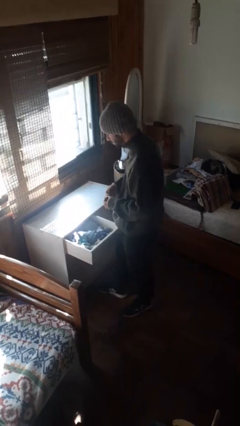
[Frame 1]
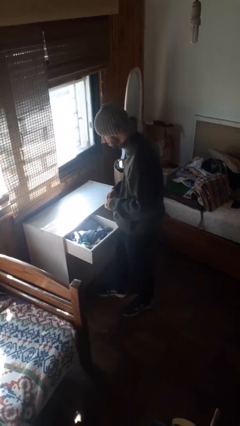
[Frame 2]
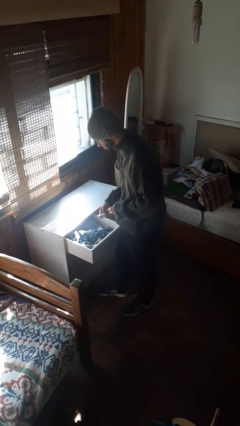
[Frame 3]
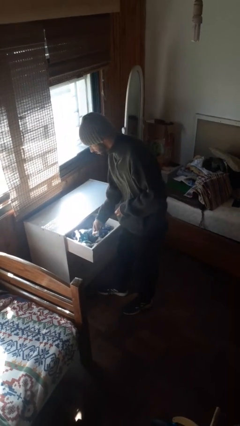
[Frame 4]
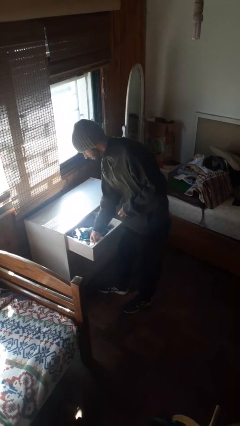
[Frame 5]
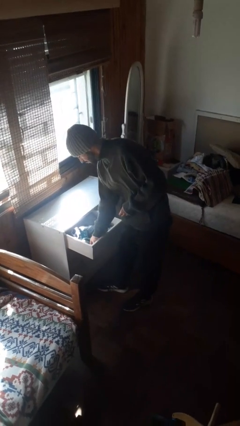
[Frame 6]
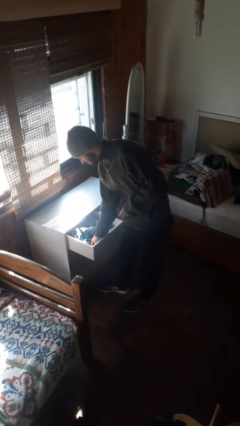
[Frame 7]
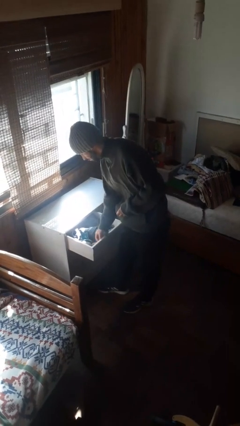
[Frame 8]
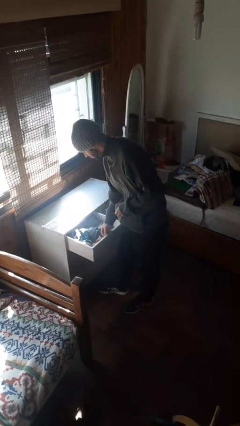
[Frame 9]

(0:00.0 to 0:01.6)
person puts clothes into dresser

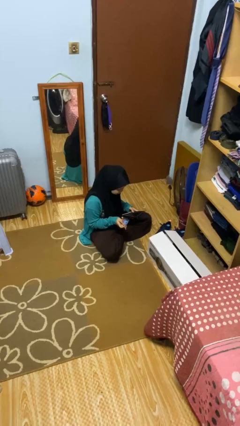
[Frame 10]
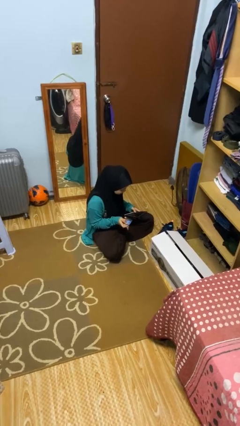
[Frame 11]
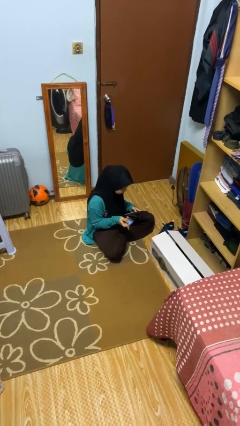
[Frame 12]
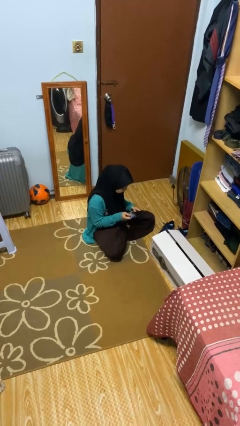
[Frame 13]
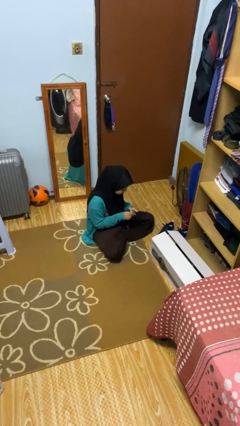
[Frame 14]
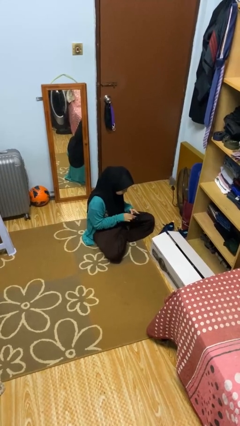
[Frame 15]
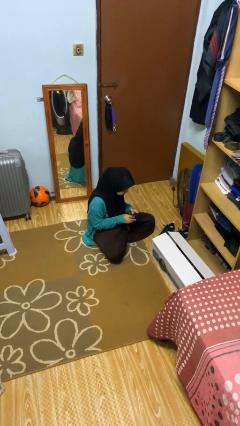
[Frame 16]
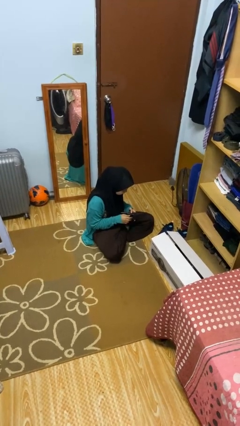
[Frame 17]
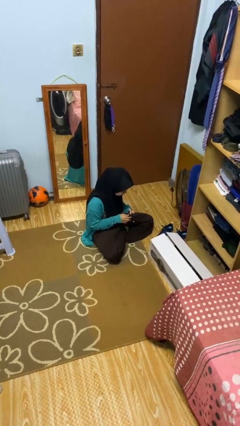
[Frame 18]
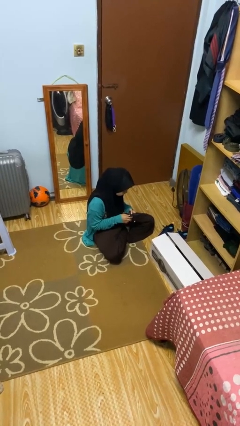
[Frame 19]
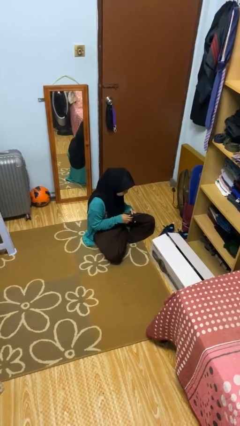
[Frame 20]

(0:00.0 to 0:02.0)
person puts object into purse

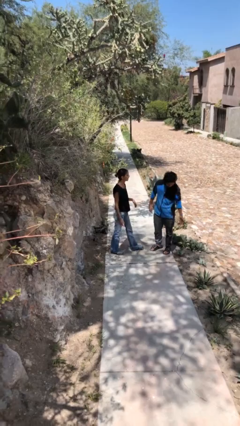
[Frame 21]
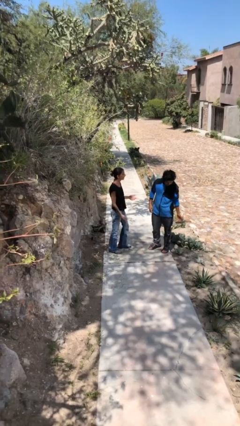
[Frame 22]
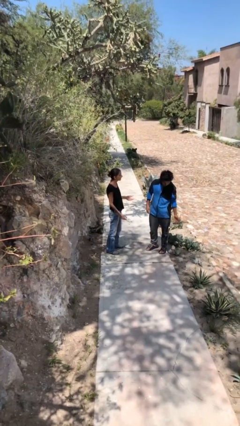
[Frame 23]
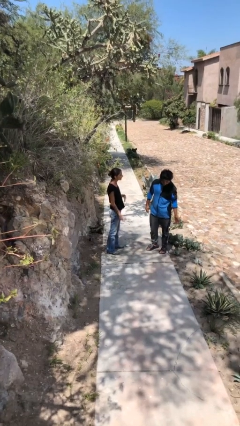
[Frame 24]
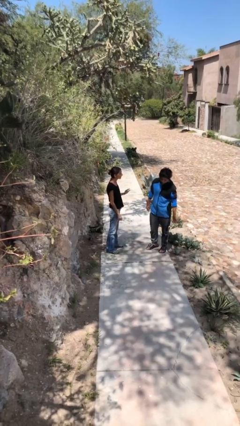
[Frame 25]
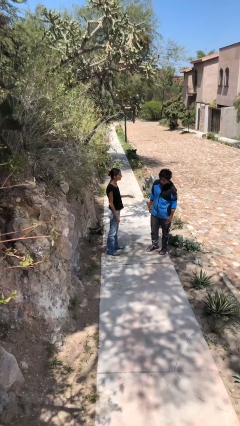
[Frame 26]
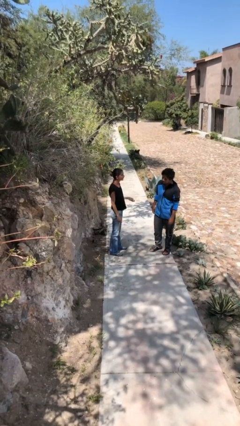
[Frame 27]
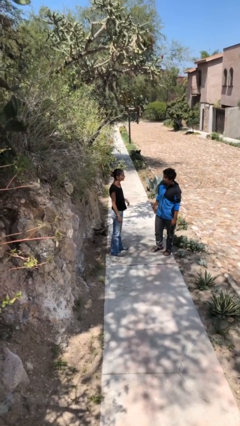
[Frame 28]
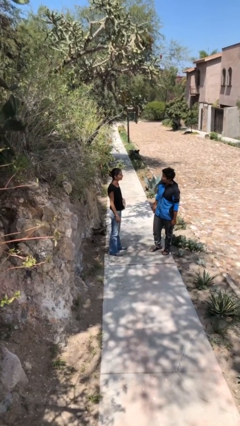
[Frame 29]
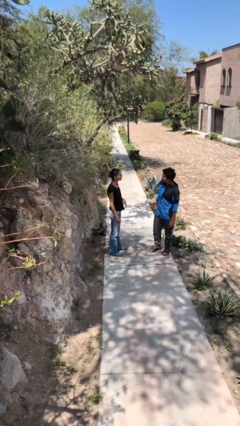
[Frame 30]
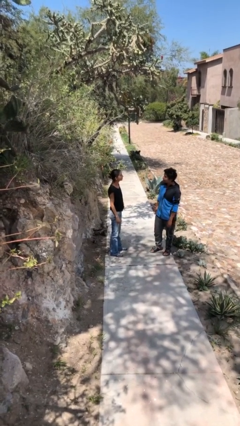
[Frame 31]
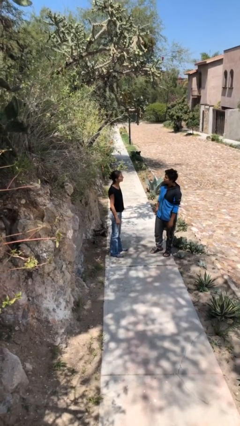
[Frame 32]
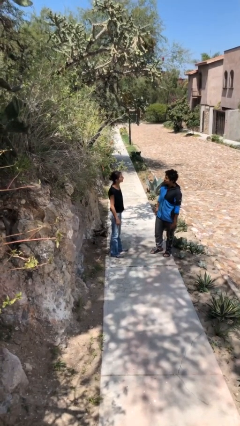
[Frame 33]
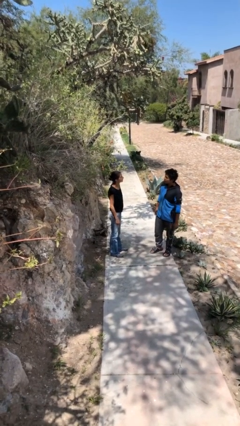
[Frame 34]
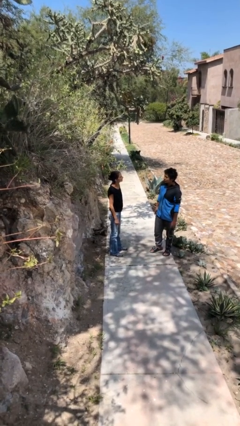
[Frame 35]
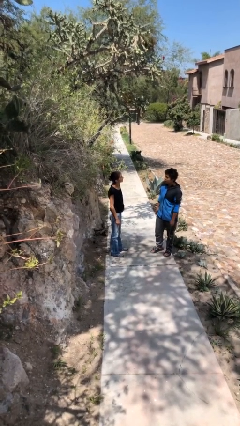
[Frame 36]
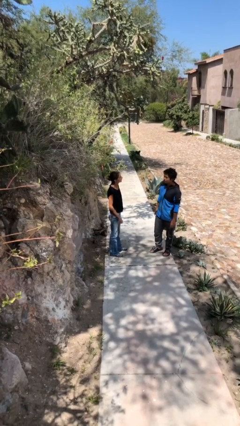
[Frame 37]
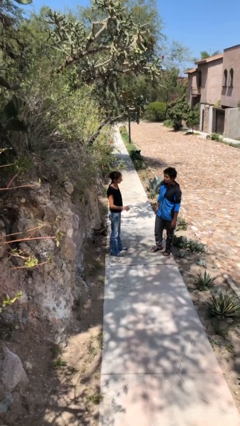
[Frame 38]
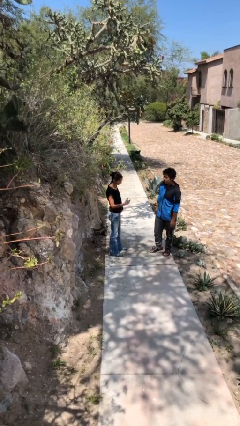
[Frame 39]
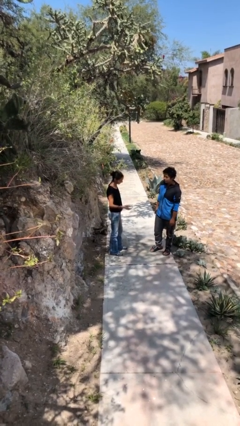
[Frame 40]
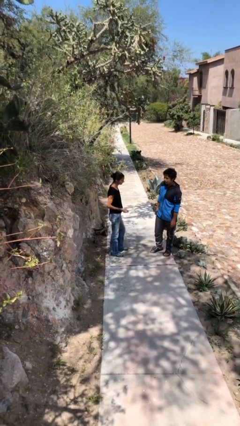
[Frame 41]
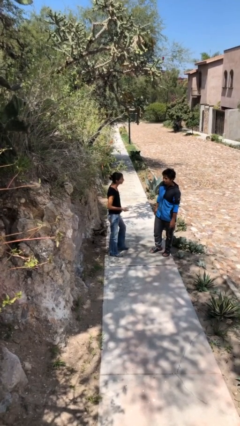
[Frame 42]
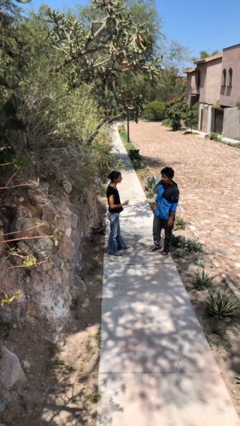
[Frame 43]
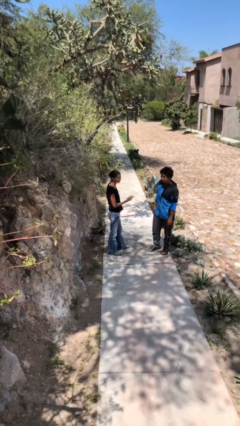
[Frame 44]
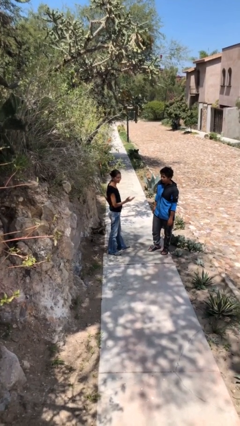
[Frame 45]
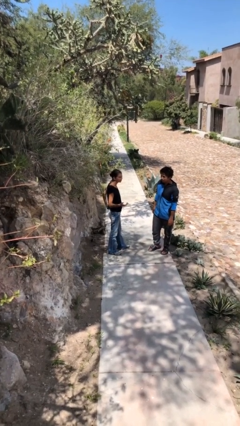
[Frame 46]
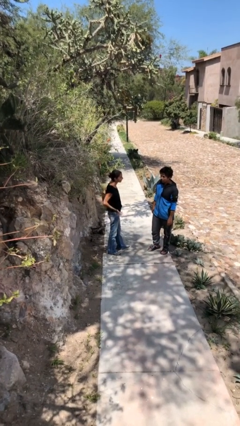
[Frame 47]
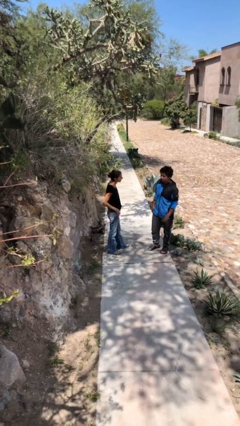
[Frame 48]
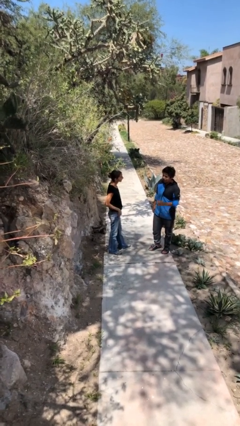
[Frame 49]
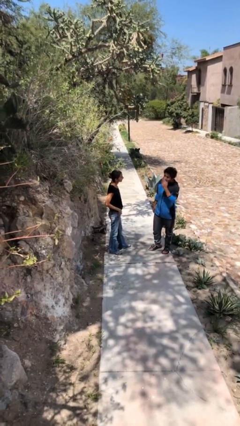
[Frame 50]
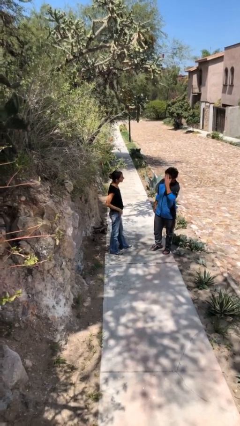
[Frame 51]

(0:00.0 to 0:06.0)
person talks to person

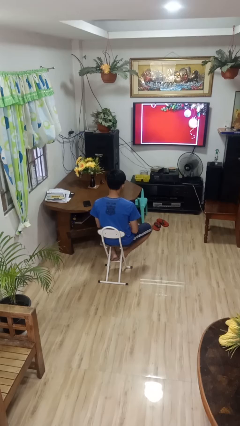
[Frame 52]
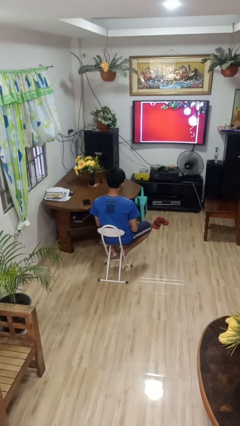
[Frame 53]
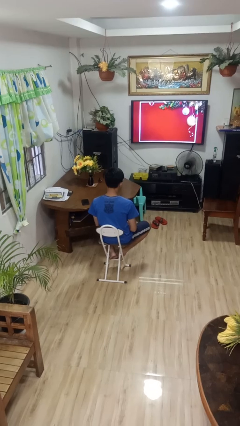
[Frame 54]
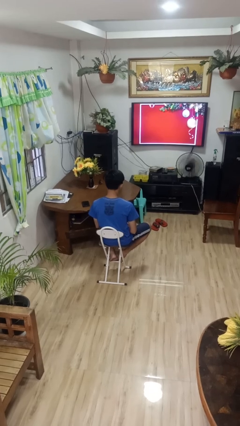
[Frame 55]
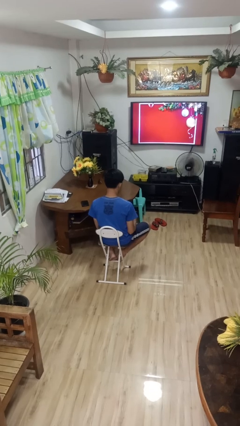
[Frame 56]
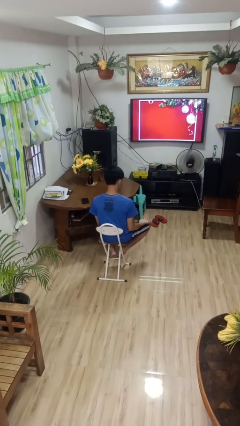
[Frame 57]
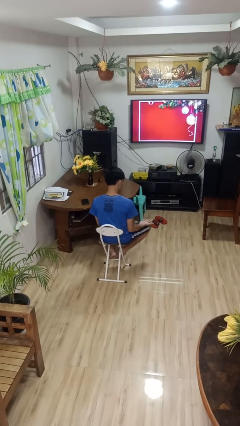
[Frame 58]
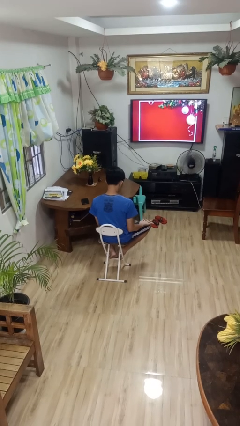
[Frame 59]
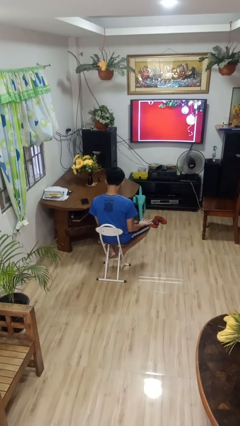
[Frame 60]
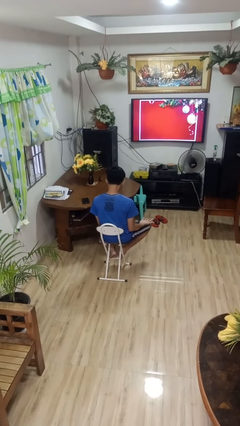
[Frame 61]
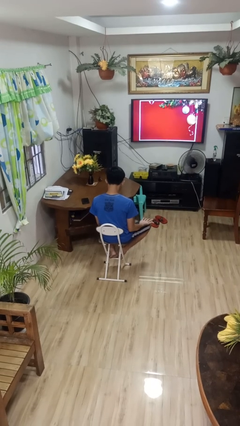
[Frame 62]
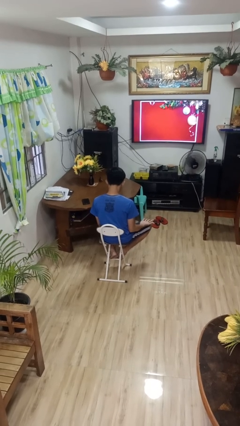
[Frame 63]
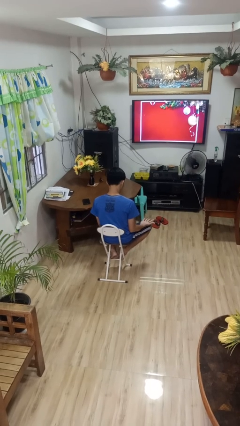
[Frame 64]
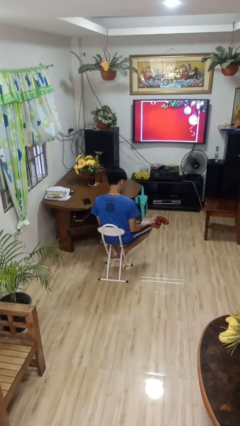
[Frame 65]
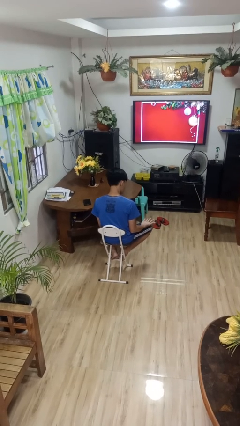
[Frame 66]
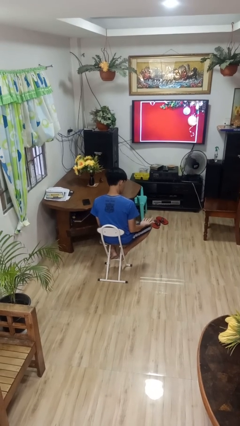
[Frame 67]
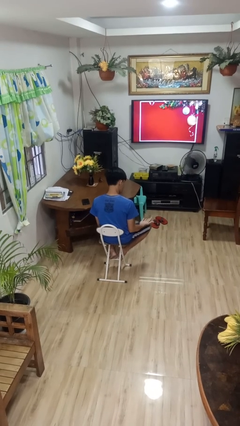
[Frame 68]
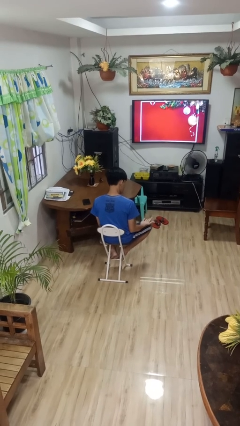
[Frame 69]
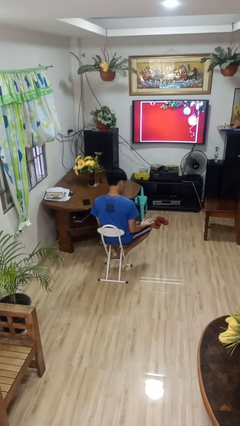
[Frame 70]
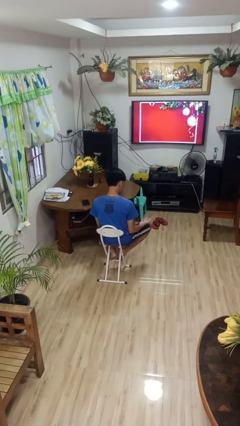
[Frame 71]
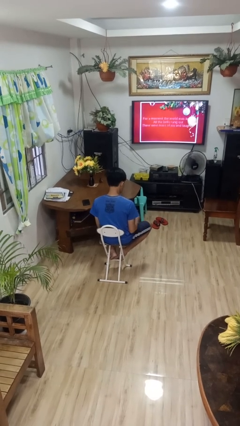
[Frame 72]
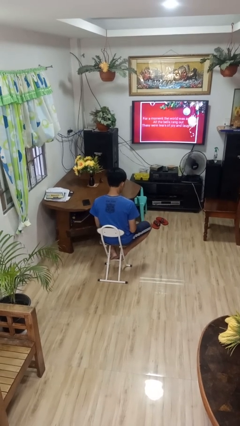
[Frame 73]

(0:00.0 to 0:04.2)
person looks at hands in lap

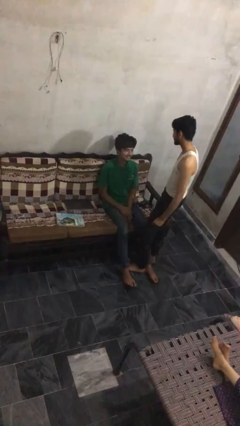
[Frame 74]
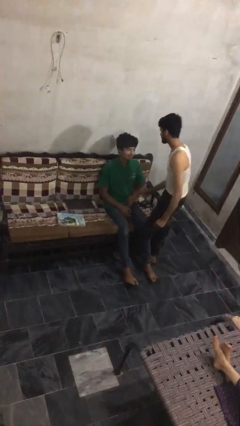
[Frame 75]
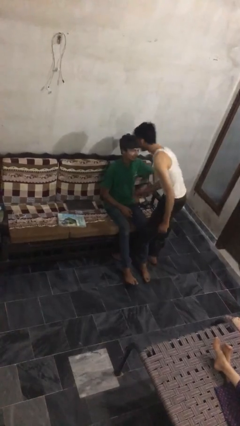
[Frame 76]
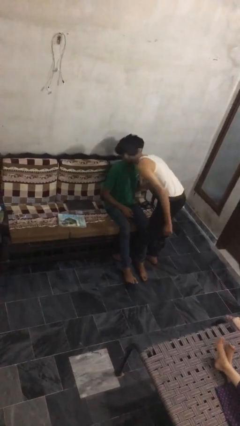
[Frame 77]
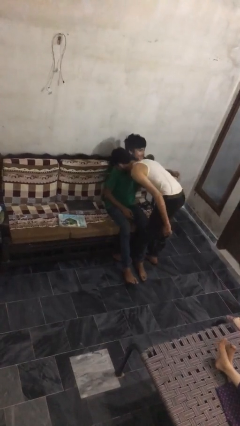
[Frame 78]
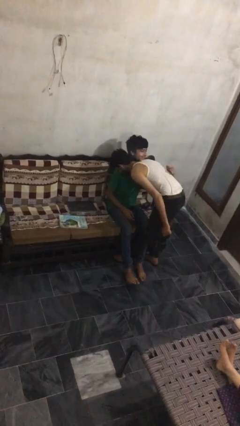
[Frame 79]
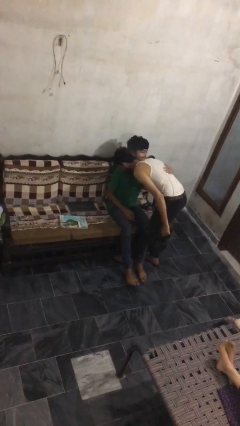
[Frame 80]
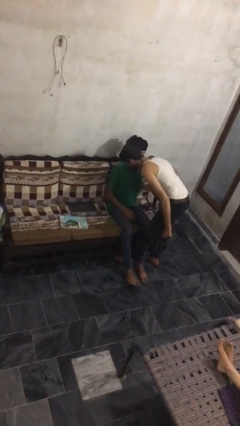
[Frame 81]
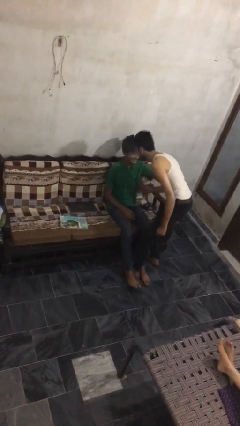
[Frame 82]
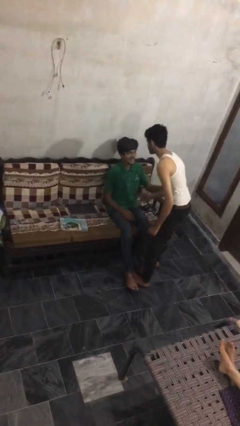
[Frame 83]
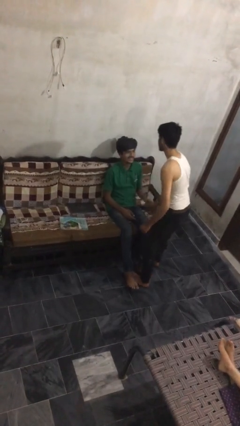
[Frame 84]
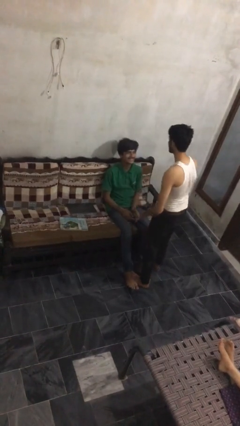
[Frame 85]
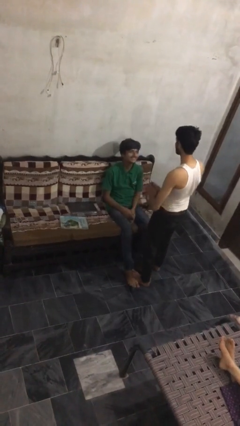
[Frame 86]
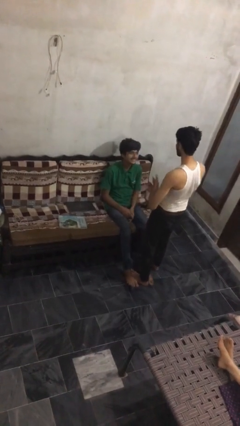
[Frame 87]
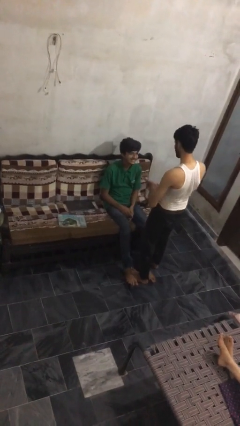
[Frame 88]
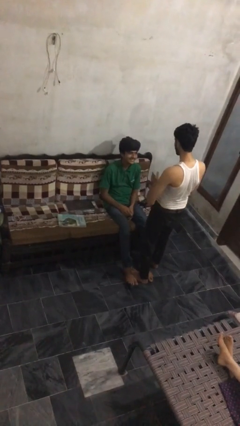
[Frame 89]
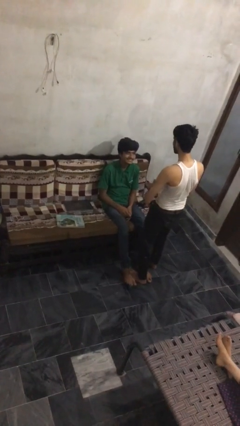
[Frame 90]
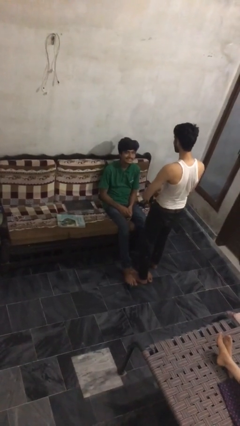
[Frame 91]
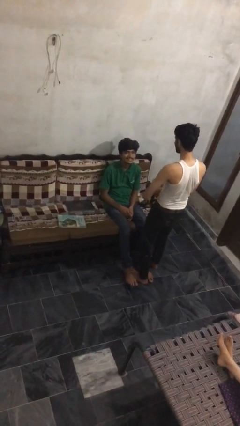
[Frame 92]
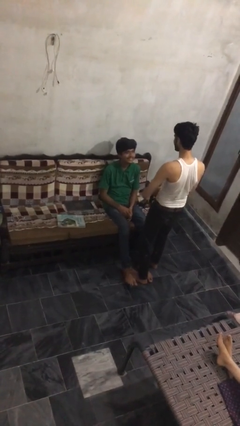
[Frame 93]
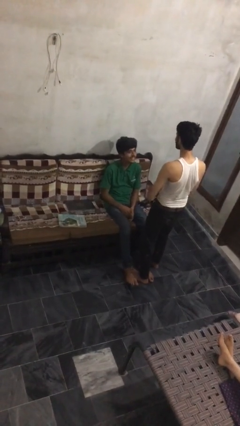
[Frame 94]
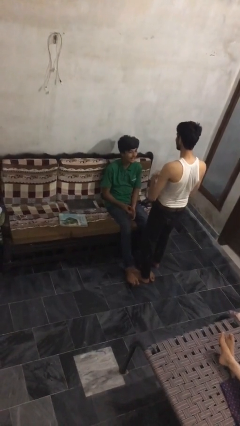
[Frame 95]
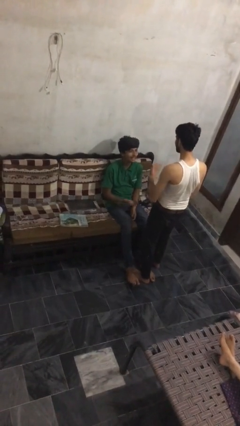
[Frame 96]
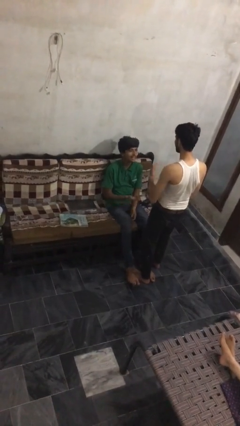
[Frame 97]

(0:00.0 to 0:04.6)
person embraces person
